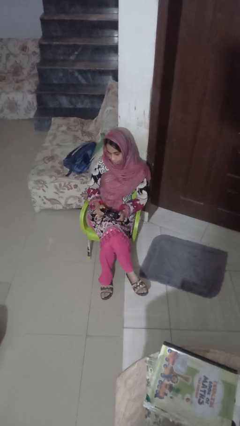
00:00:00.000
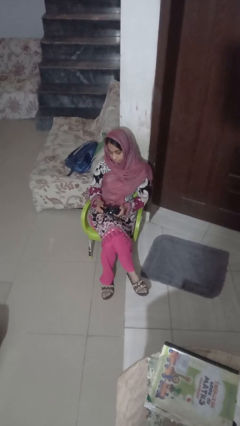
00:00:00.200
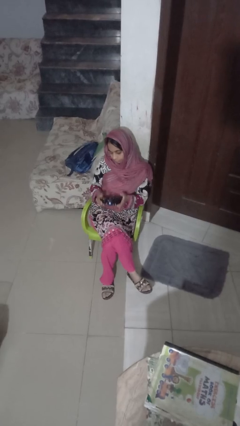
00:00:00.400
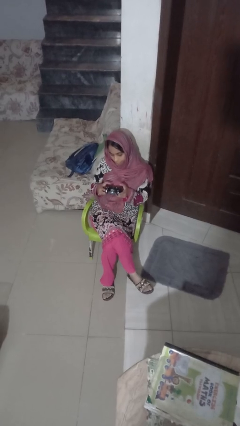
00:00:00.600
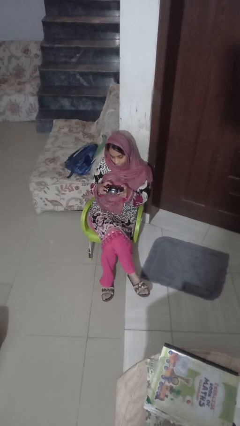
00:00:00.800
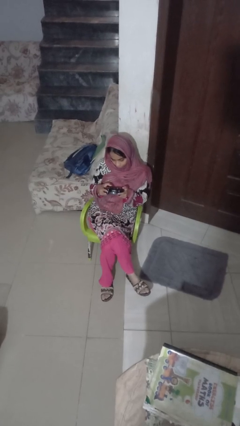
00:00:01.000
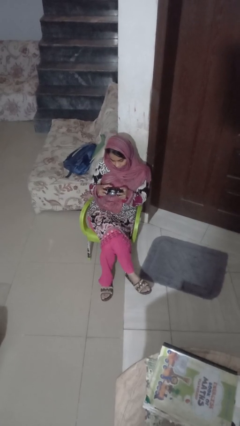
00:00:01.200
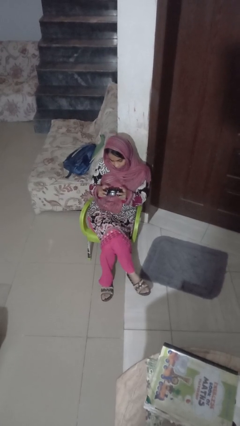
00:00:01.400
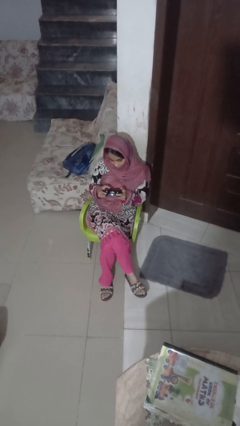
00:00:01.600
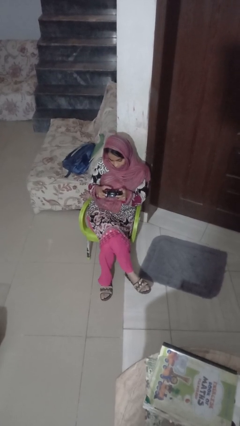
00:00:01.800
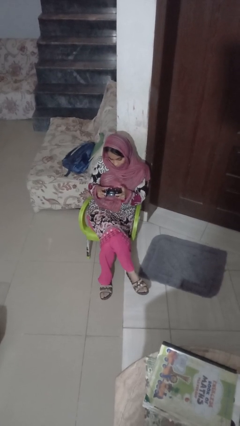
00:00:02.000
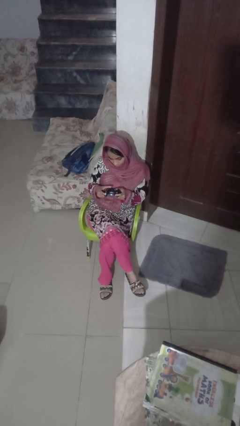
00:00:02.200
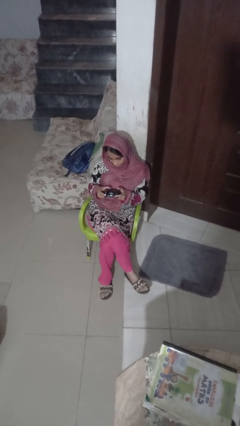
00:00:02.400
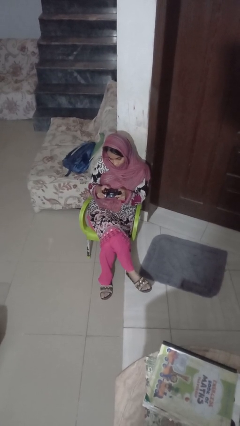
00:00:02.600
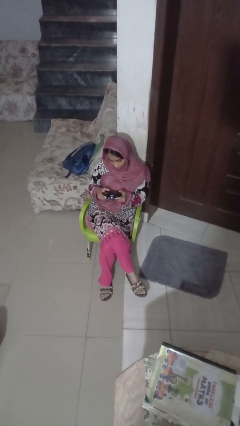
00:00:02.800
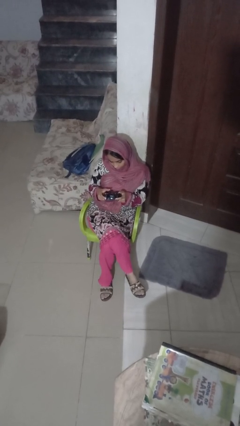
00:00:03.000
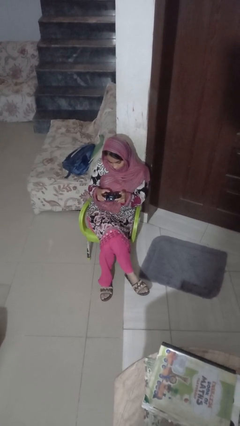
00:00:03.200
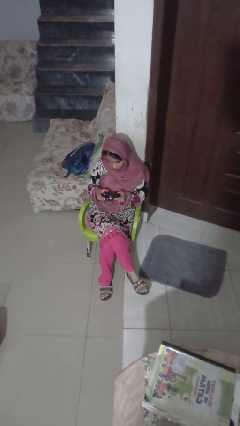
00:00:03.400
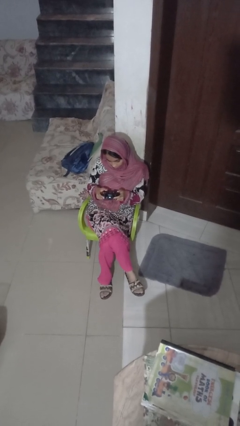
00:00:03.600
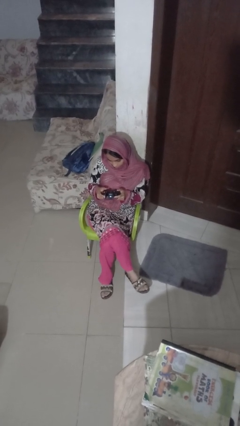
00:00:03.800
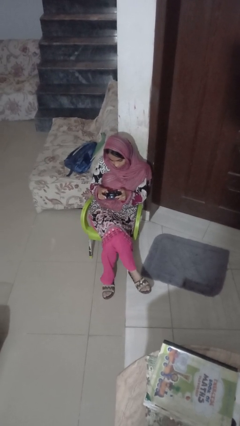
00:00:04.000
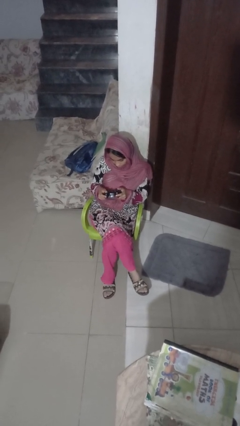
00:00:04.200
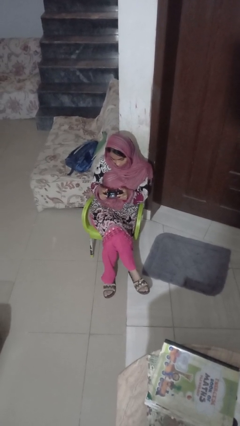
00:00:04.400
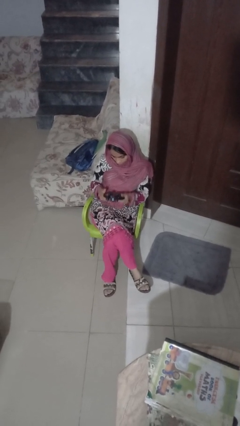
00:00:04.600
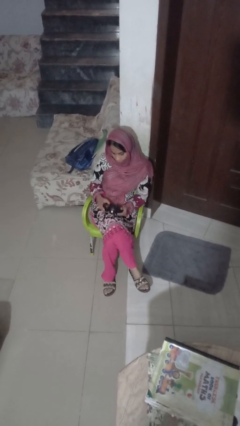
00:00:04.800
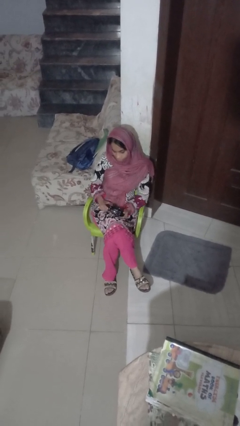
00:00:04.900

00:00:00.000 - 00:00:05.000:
person interacts with handheld game

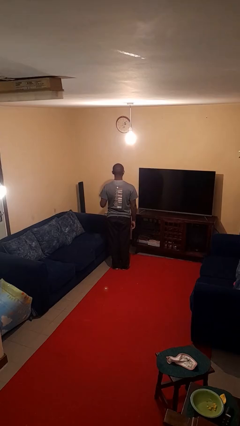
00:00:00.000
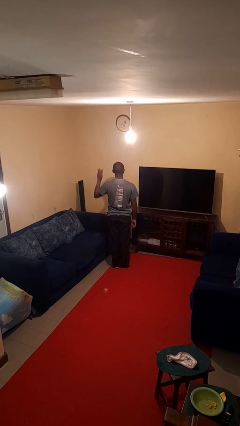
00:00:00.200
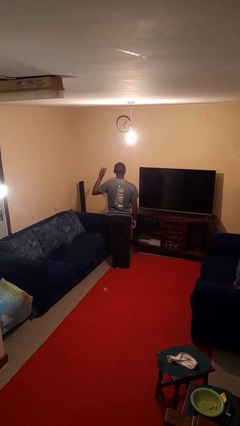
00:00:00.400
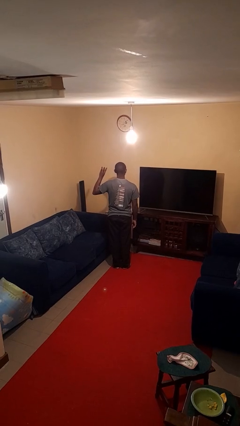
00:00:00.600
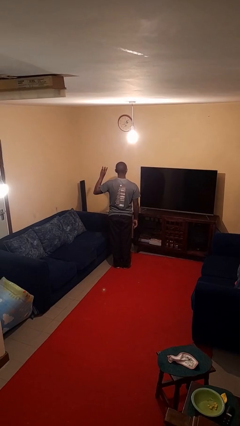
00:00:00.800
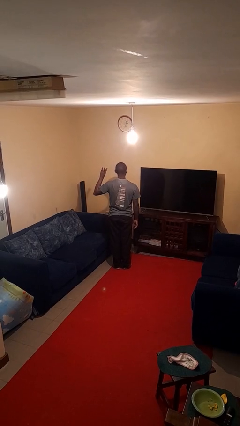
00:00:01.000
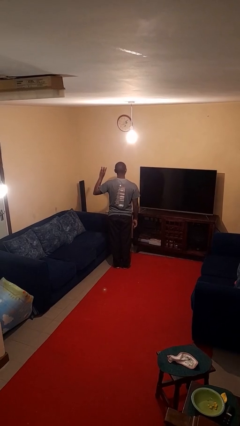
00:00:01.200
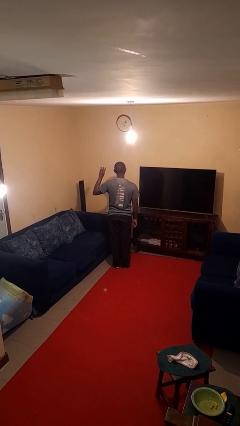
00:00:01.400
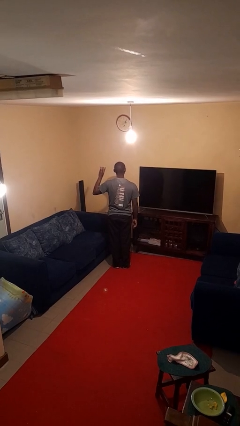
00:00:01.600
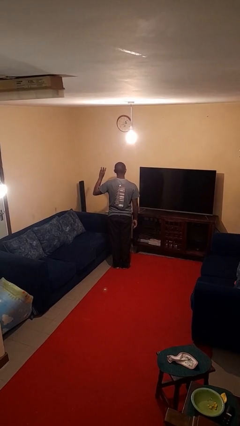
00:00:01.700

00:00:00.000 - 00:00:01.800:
person gestures number three

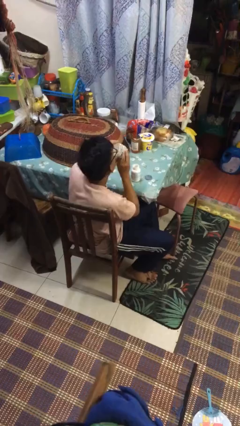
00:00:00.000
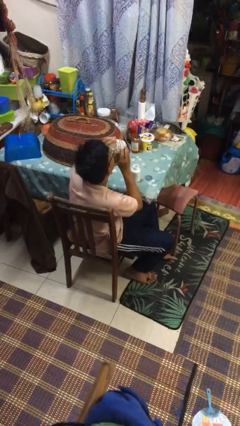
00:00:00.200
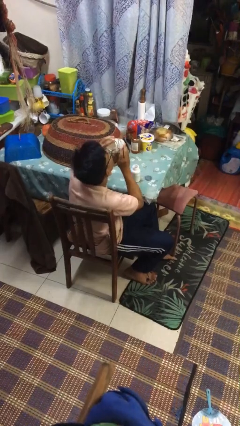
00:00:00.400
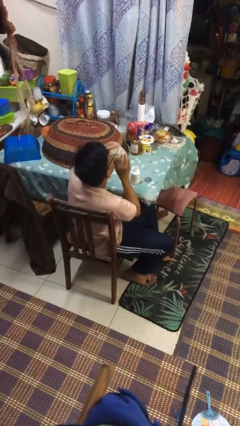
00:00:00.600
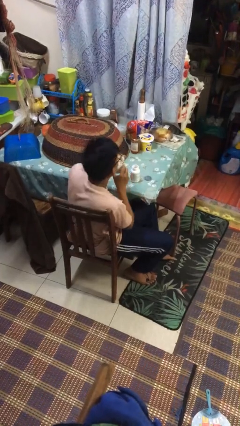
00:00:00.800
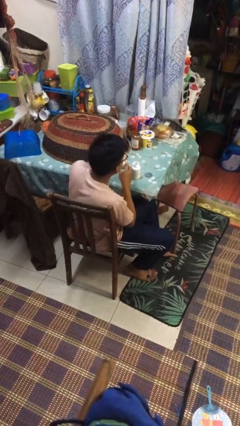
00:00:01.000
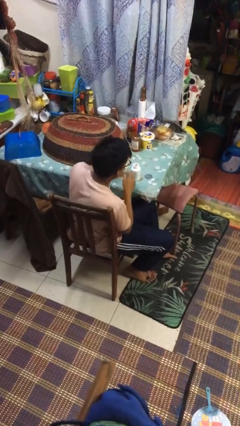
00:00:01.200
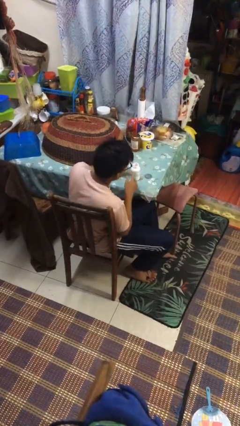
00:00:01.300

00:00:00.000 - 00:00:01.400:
person drinks from cup

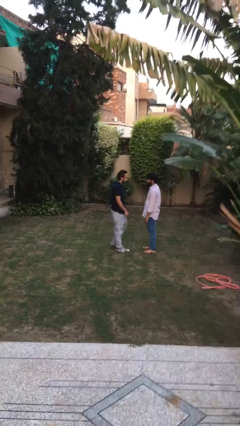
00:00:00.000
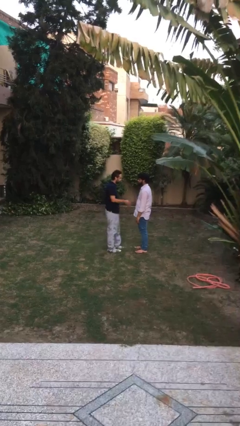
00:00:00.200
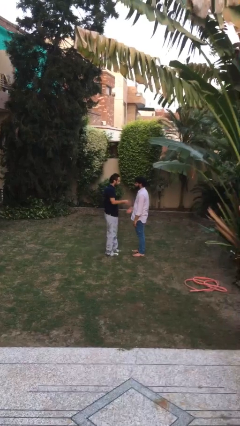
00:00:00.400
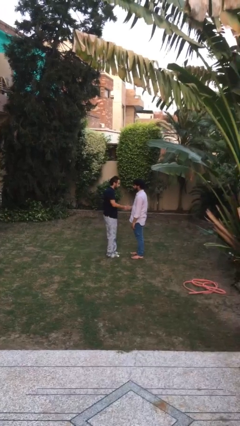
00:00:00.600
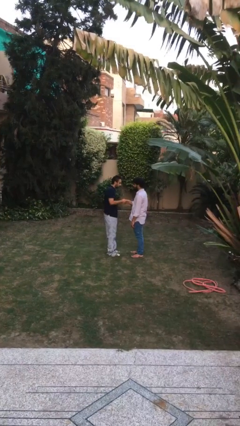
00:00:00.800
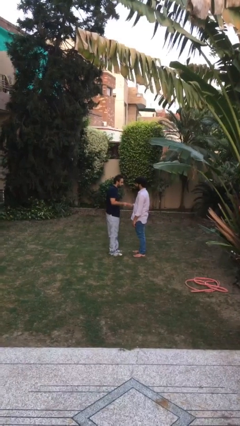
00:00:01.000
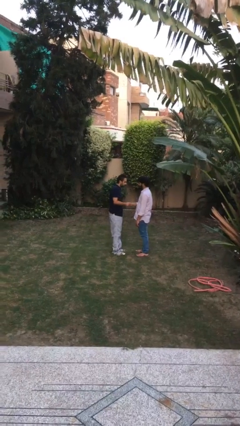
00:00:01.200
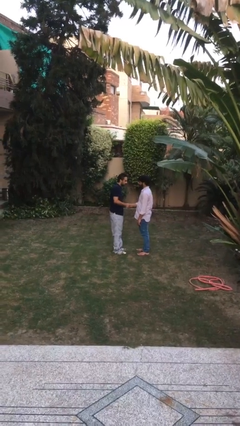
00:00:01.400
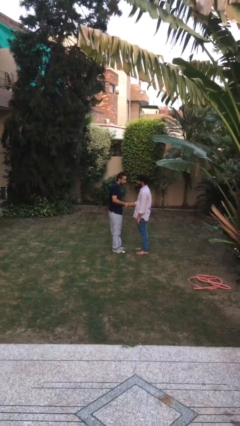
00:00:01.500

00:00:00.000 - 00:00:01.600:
person shakes hand

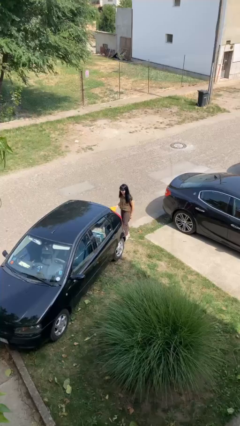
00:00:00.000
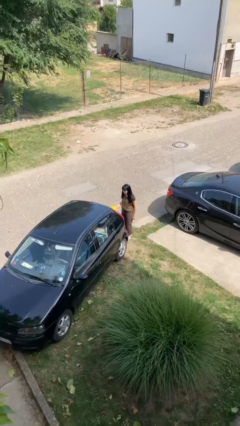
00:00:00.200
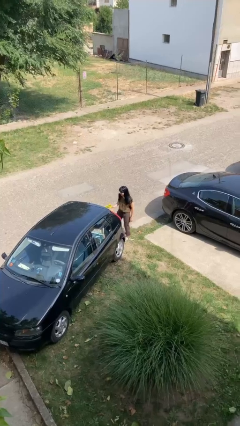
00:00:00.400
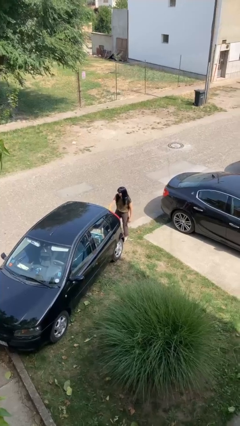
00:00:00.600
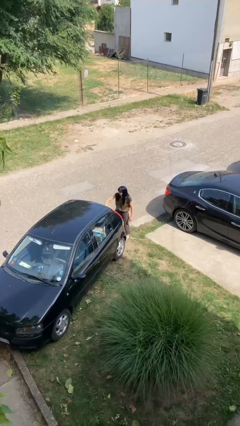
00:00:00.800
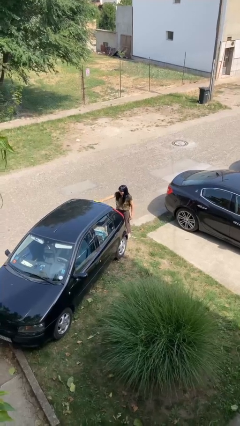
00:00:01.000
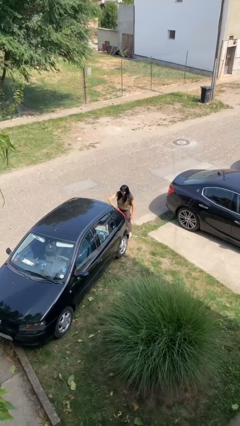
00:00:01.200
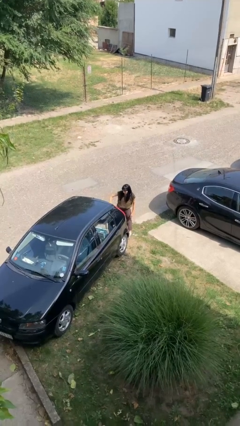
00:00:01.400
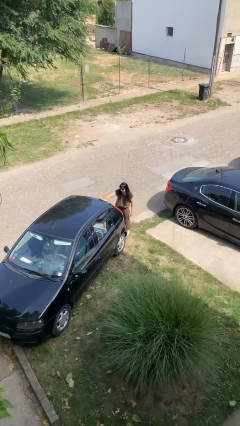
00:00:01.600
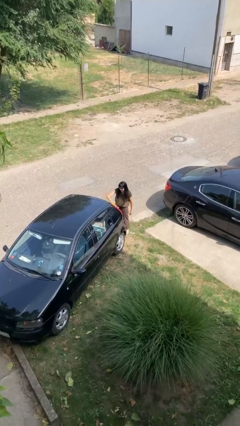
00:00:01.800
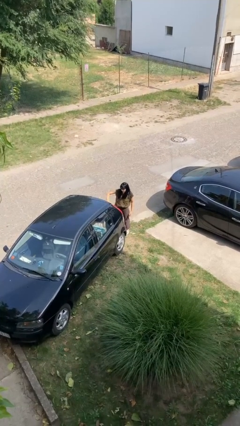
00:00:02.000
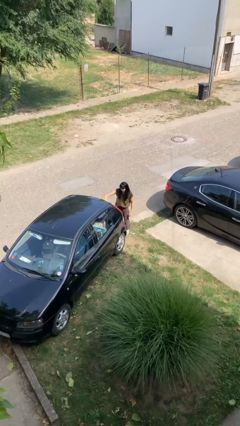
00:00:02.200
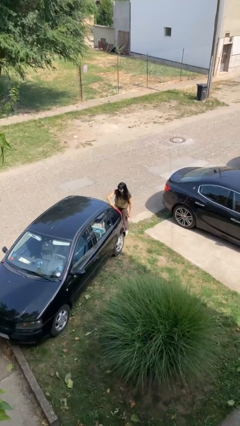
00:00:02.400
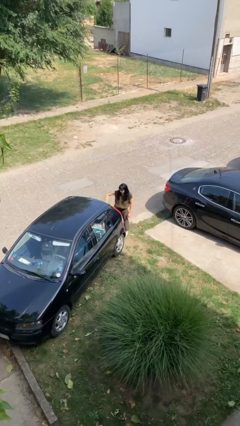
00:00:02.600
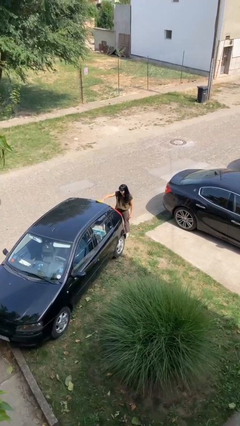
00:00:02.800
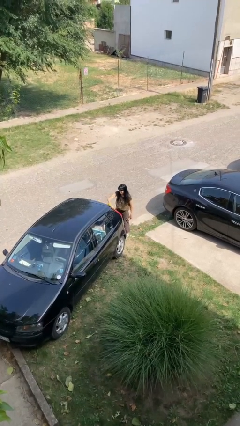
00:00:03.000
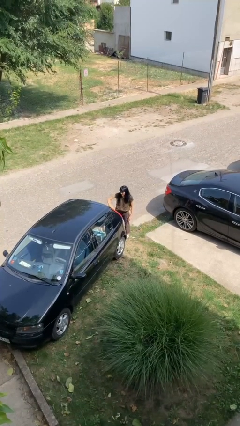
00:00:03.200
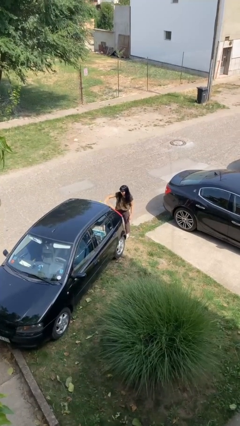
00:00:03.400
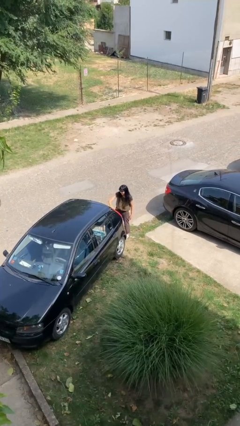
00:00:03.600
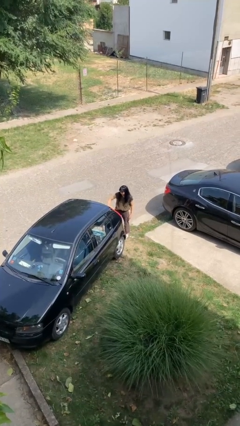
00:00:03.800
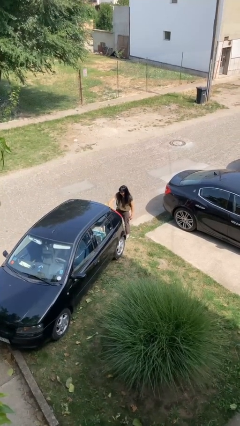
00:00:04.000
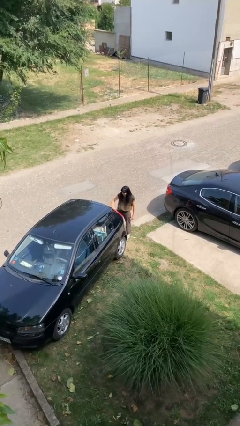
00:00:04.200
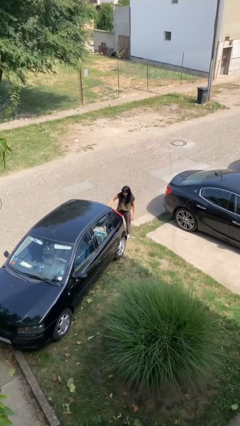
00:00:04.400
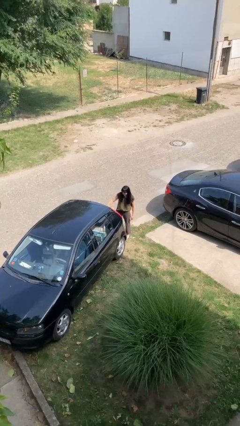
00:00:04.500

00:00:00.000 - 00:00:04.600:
person polishes car with rag

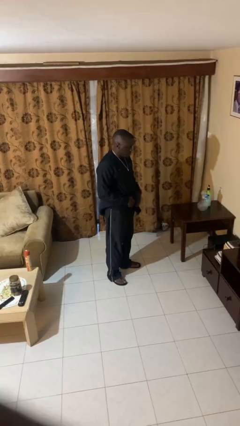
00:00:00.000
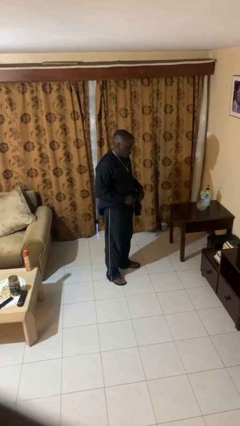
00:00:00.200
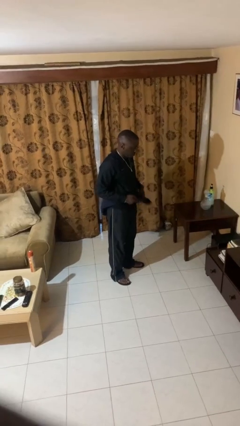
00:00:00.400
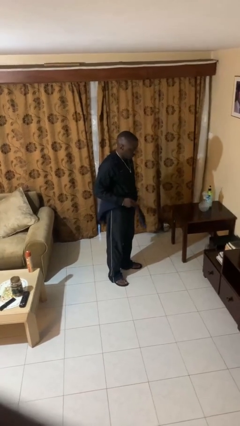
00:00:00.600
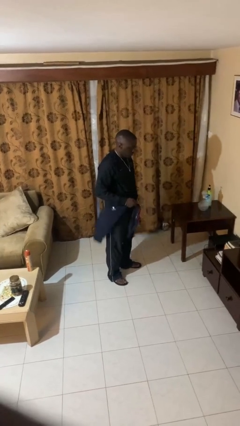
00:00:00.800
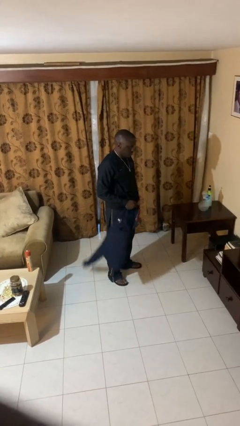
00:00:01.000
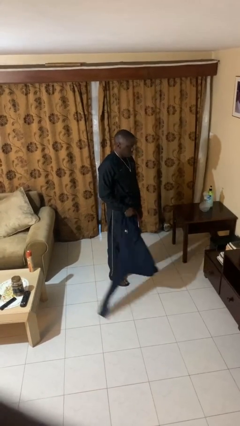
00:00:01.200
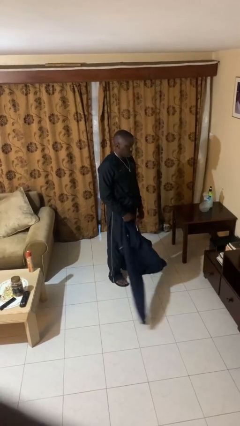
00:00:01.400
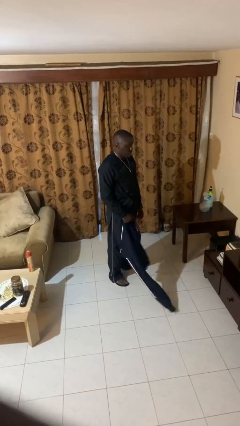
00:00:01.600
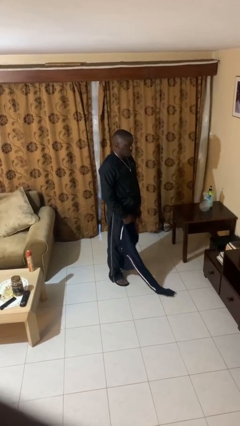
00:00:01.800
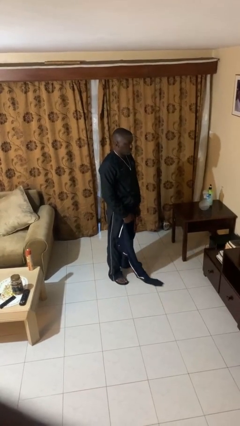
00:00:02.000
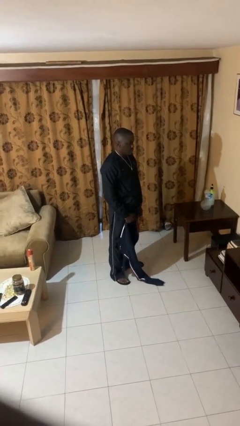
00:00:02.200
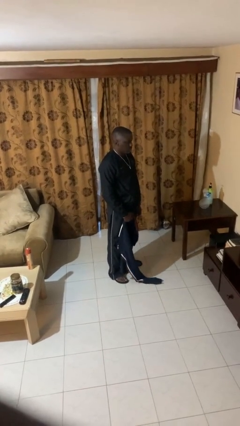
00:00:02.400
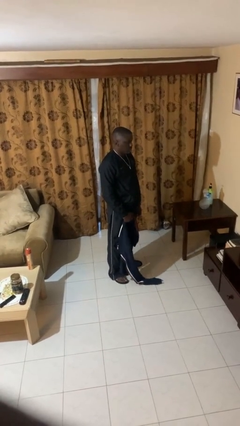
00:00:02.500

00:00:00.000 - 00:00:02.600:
person unties jacket around waist

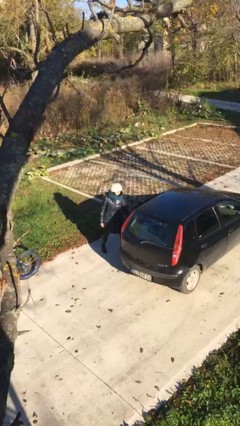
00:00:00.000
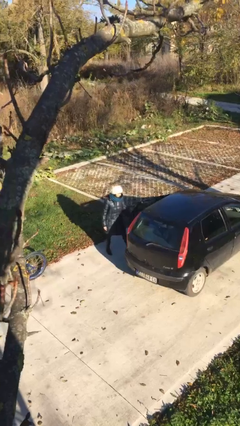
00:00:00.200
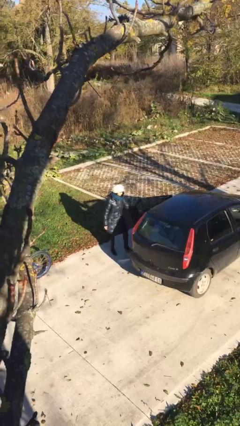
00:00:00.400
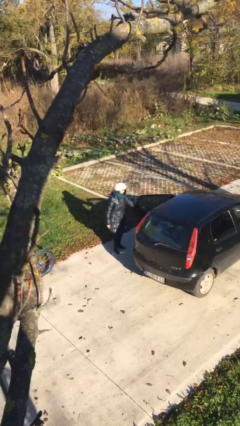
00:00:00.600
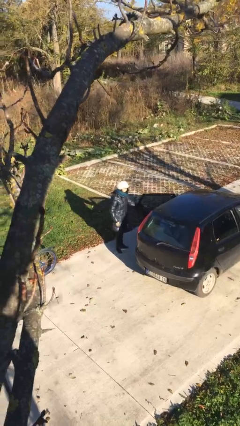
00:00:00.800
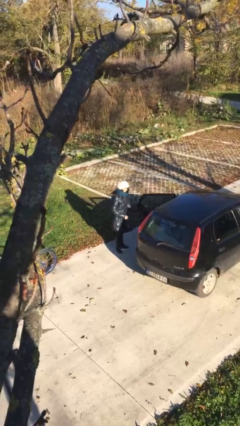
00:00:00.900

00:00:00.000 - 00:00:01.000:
person opens car door
